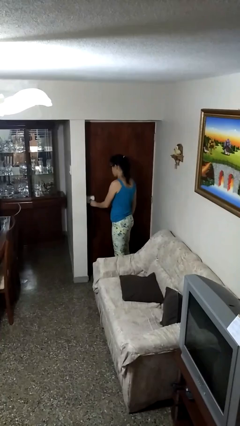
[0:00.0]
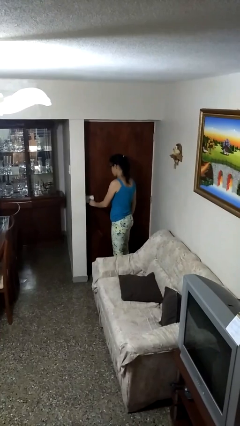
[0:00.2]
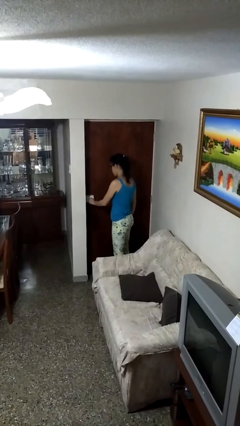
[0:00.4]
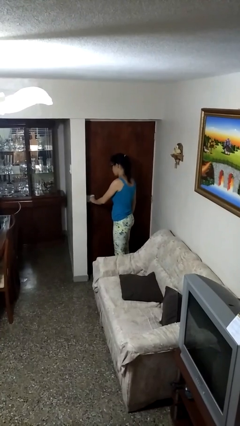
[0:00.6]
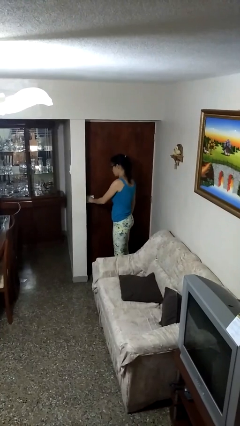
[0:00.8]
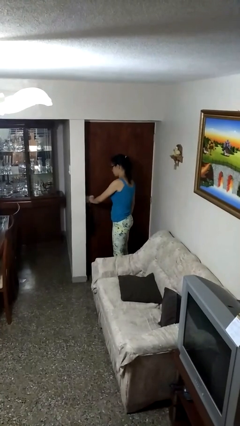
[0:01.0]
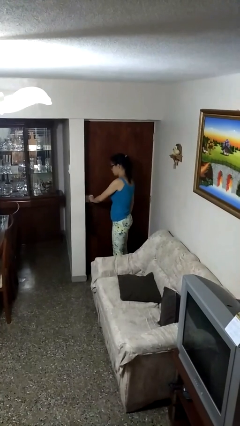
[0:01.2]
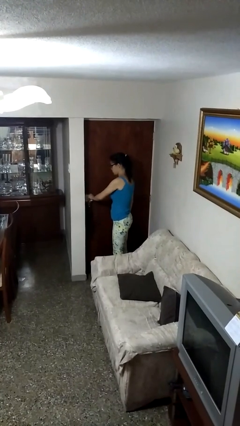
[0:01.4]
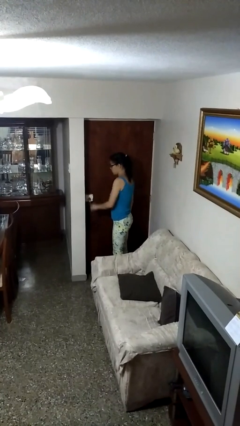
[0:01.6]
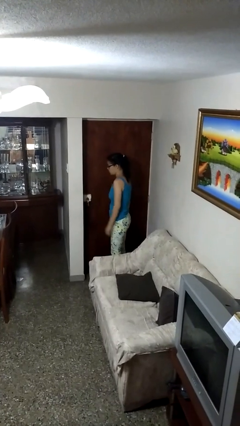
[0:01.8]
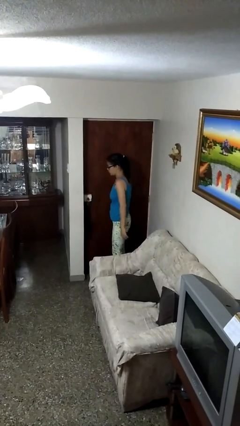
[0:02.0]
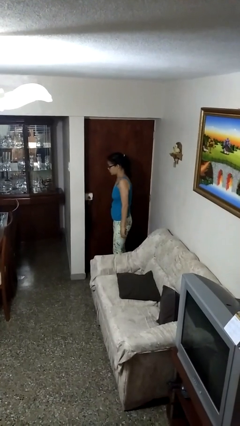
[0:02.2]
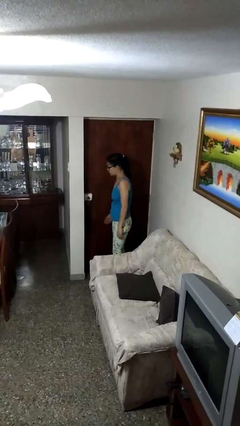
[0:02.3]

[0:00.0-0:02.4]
person locks door with keys

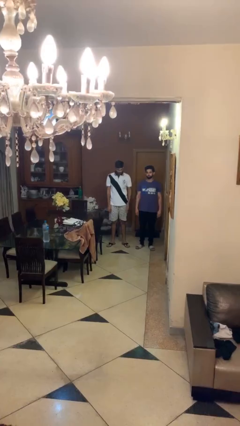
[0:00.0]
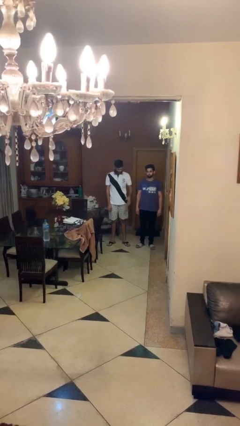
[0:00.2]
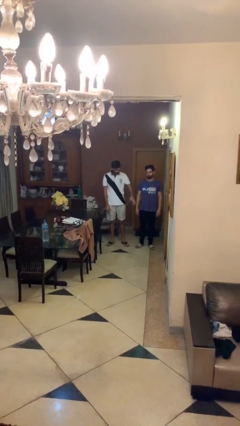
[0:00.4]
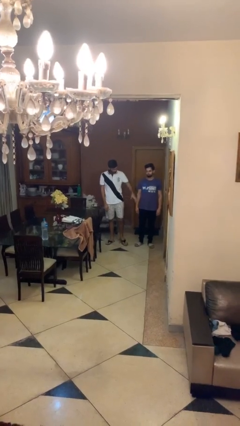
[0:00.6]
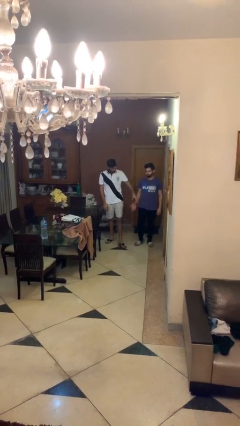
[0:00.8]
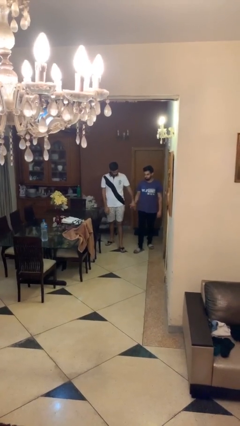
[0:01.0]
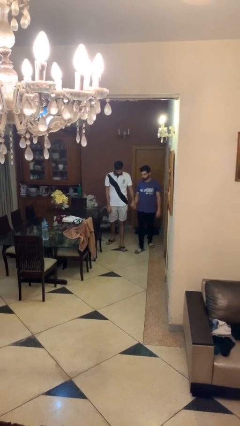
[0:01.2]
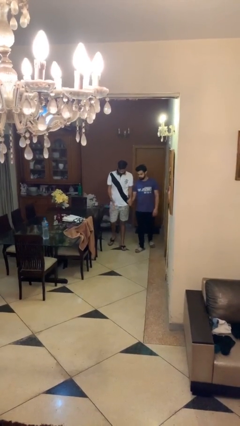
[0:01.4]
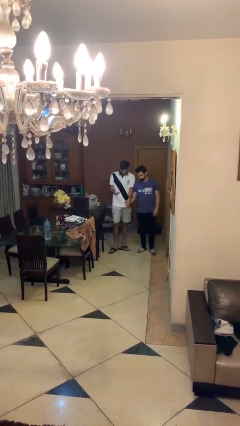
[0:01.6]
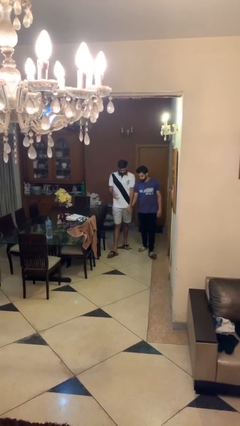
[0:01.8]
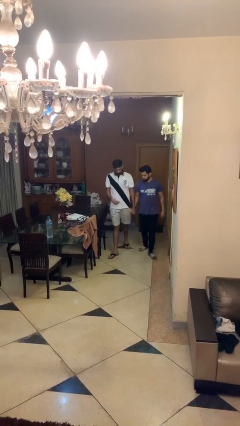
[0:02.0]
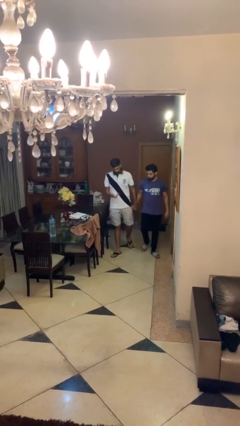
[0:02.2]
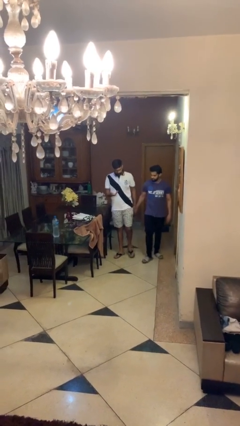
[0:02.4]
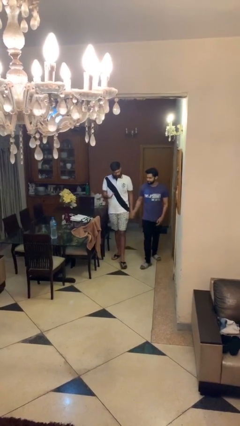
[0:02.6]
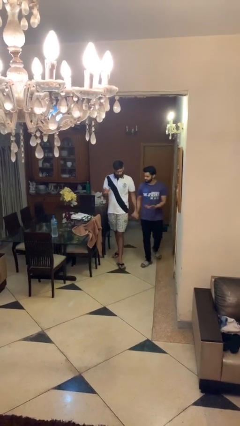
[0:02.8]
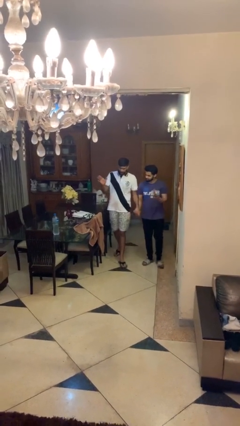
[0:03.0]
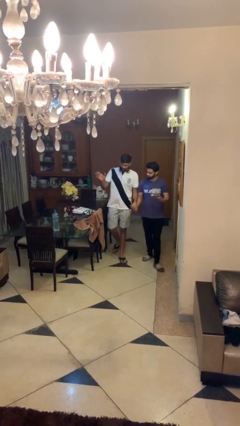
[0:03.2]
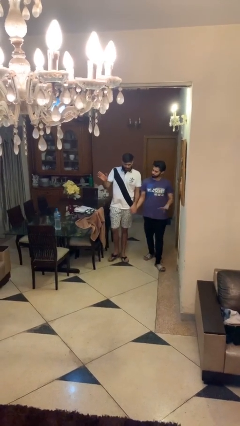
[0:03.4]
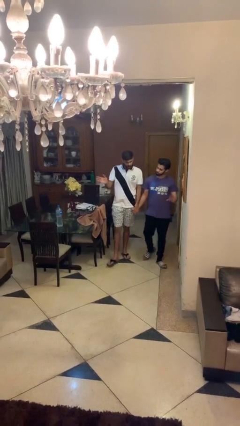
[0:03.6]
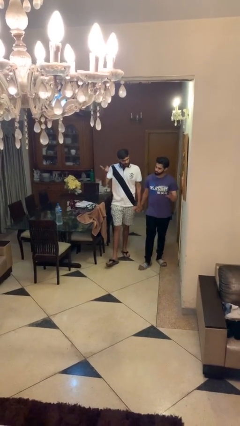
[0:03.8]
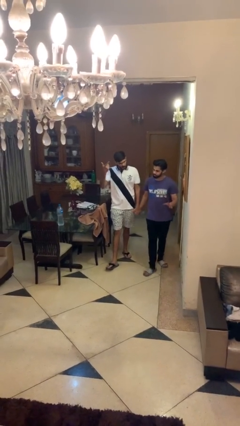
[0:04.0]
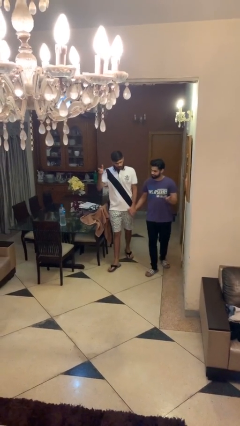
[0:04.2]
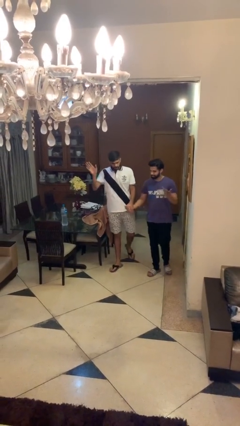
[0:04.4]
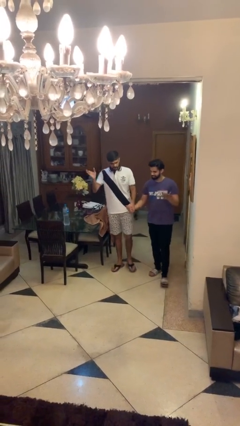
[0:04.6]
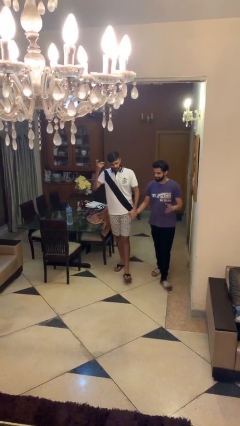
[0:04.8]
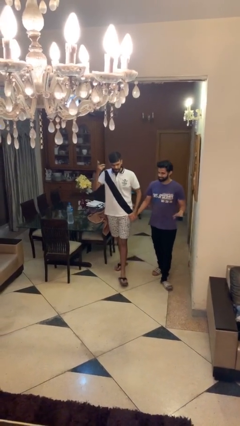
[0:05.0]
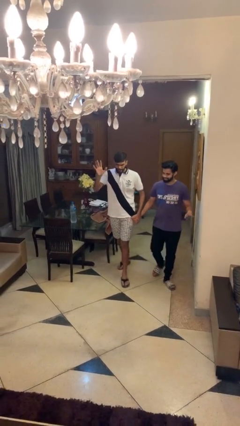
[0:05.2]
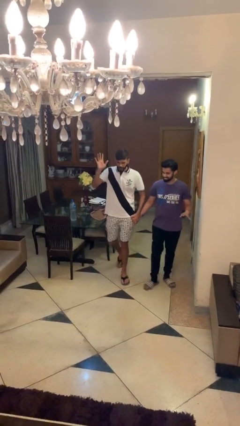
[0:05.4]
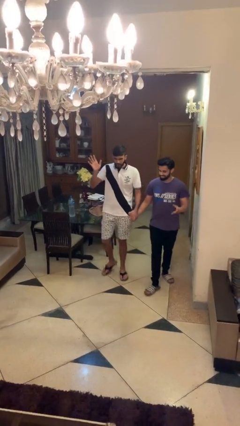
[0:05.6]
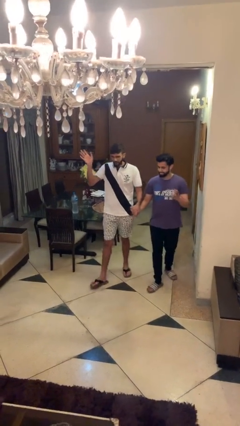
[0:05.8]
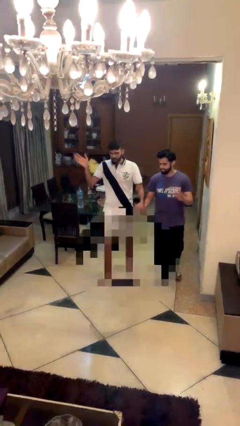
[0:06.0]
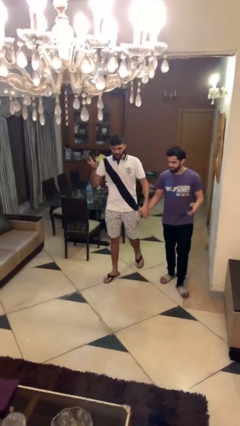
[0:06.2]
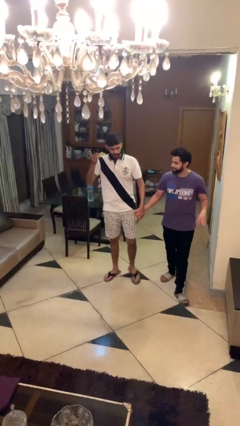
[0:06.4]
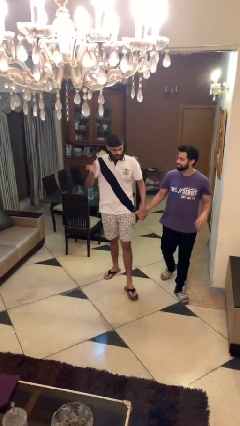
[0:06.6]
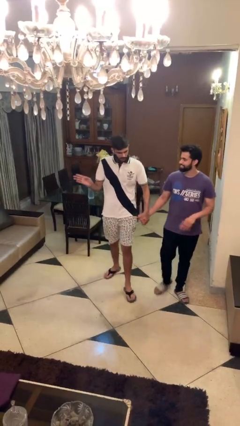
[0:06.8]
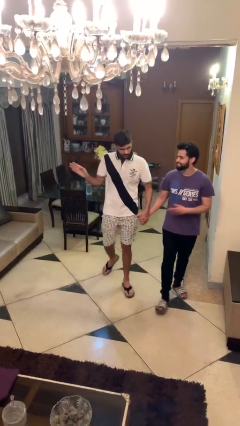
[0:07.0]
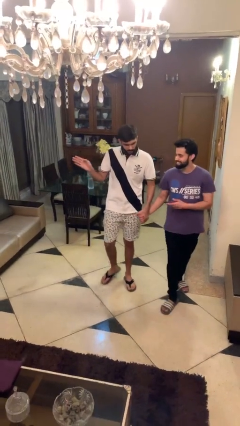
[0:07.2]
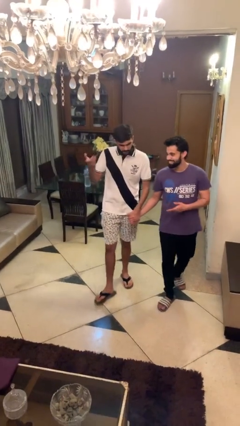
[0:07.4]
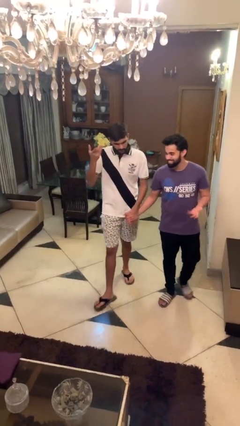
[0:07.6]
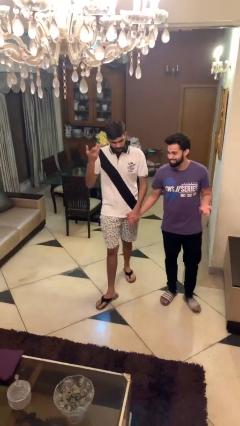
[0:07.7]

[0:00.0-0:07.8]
person holds hand

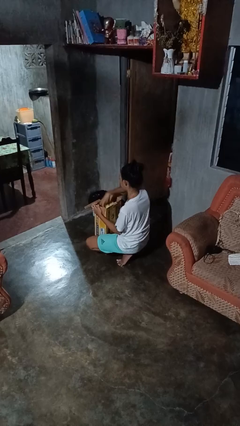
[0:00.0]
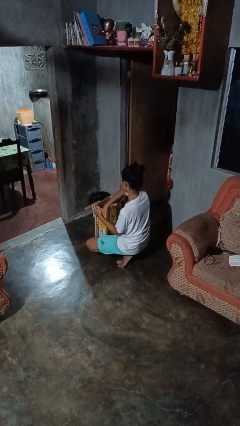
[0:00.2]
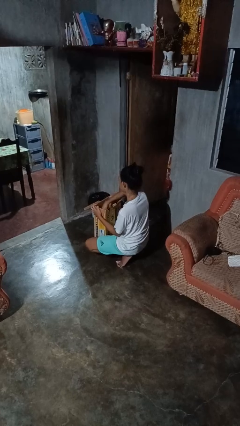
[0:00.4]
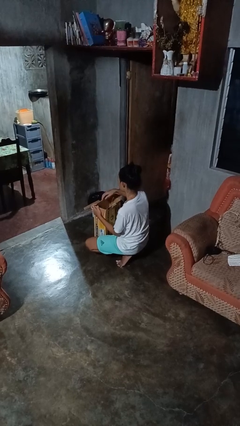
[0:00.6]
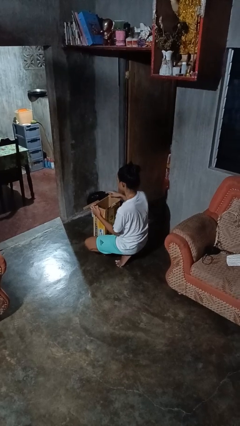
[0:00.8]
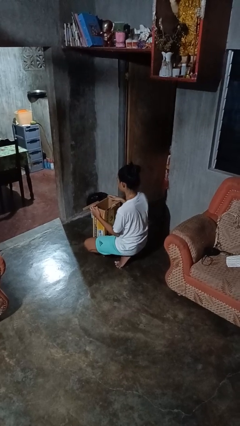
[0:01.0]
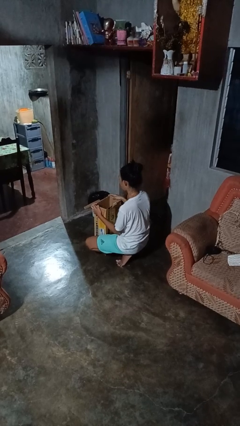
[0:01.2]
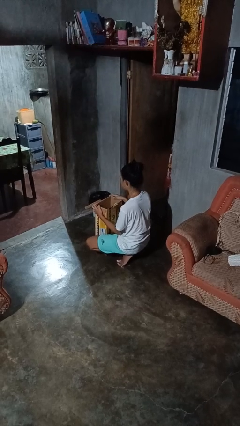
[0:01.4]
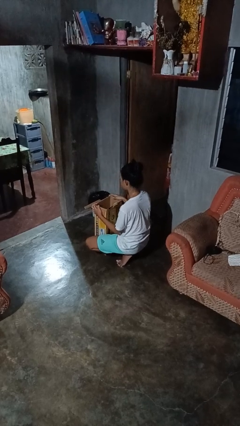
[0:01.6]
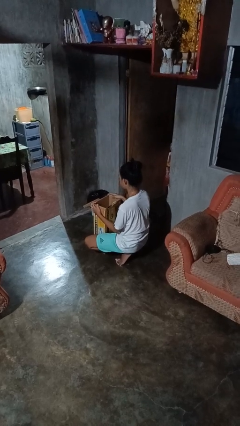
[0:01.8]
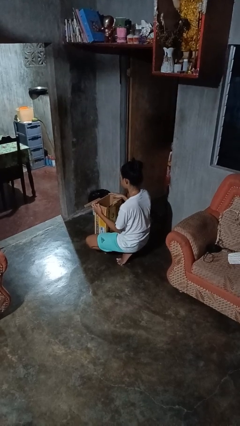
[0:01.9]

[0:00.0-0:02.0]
person puts object into box

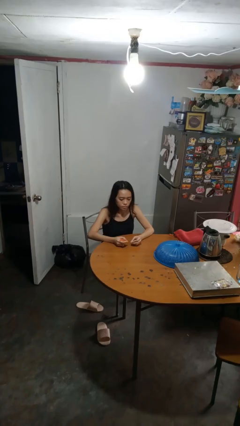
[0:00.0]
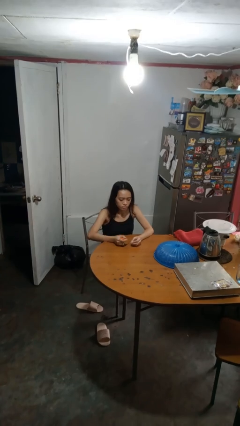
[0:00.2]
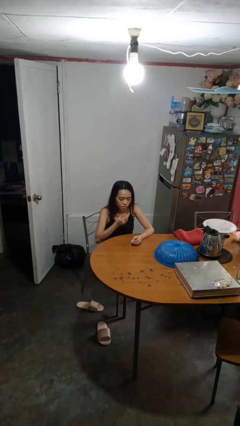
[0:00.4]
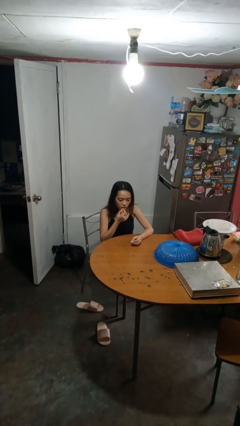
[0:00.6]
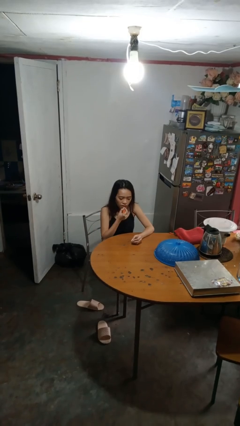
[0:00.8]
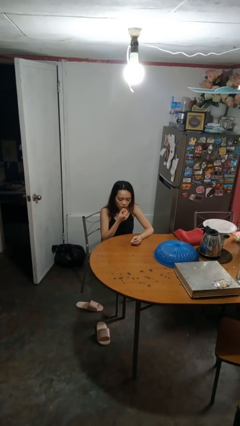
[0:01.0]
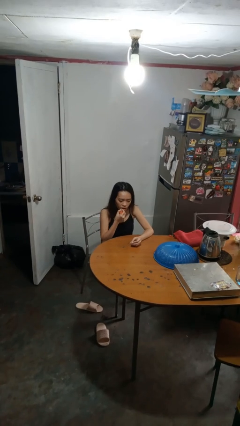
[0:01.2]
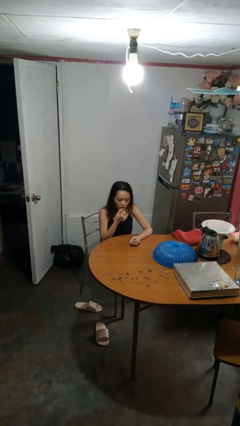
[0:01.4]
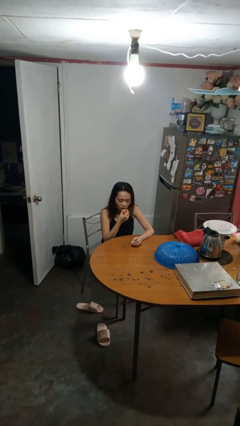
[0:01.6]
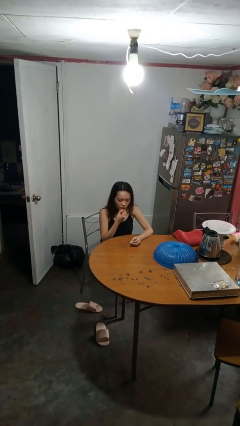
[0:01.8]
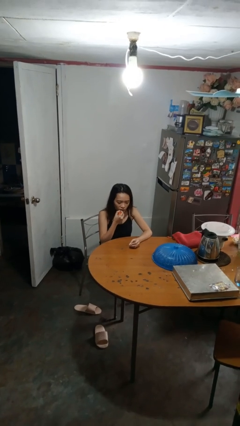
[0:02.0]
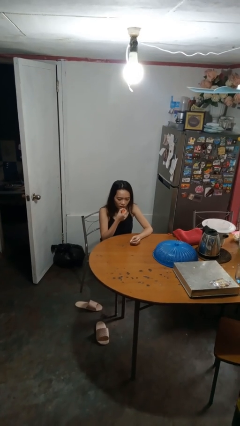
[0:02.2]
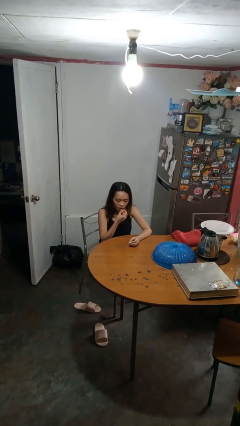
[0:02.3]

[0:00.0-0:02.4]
person applies lip makeup

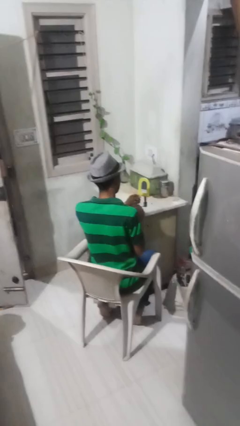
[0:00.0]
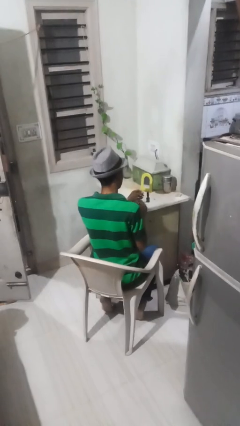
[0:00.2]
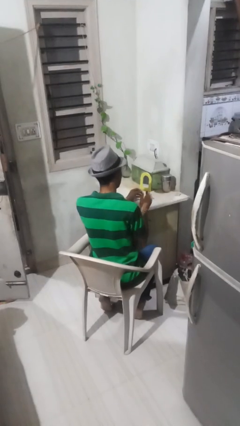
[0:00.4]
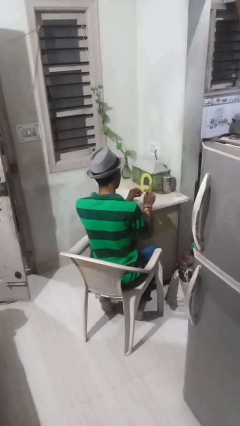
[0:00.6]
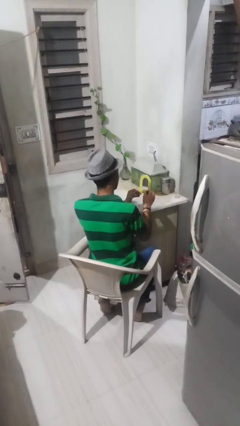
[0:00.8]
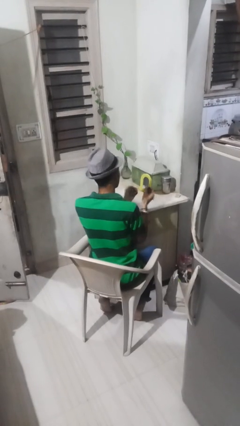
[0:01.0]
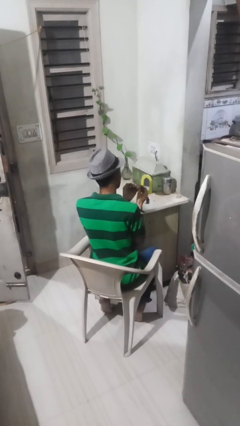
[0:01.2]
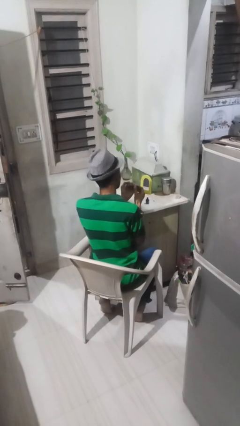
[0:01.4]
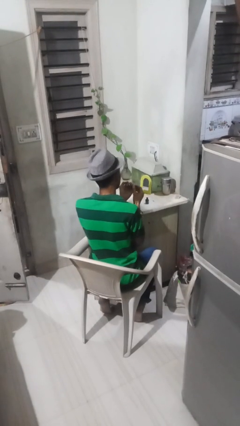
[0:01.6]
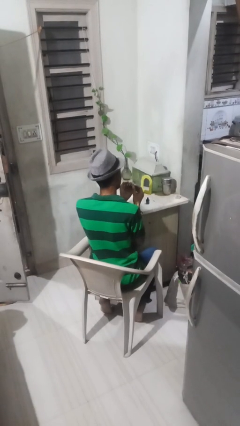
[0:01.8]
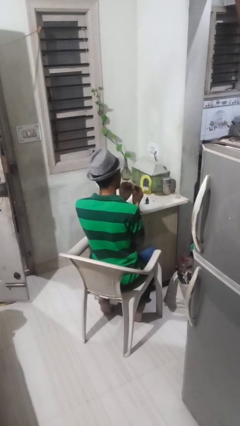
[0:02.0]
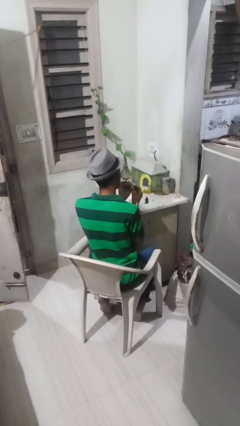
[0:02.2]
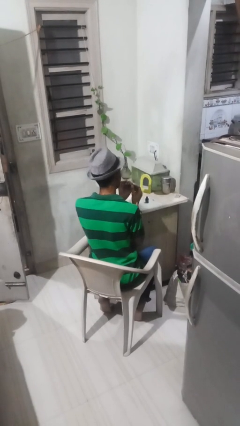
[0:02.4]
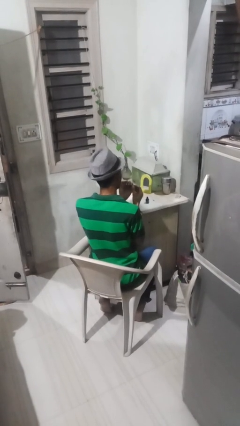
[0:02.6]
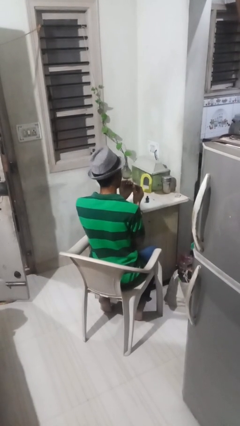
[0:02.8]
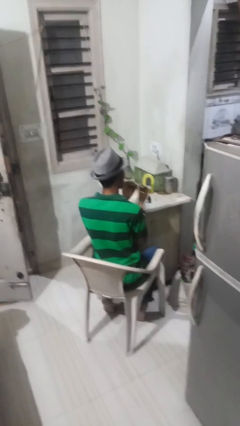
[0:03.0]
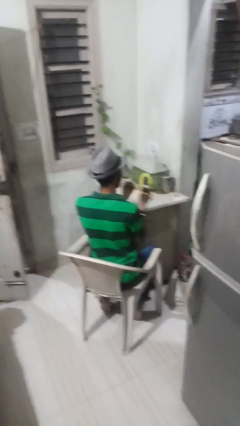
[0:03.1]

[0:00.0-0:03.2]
person paints fingernails

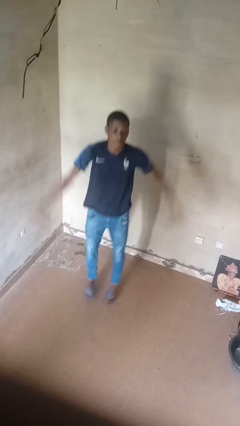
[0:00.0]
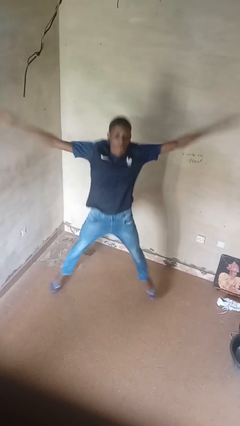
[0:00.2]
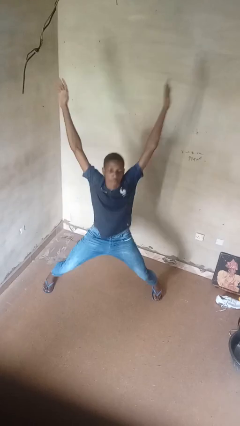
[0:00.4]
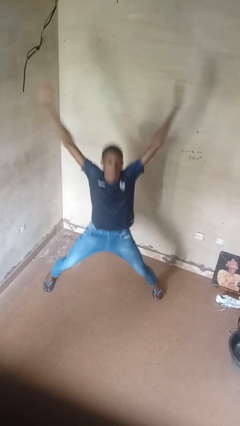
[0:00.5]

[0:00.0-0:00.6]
person exercises with jumping jacks
